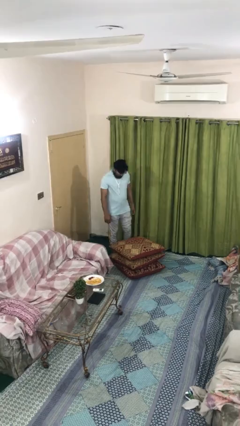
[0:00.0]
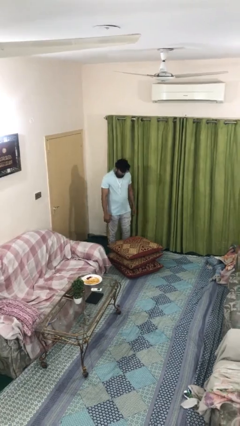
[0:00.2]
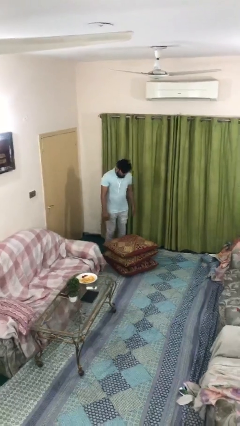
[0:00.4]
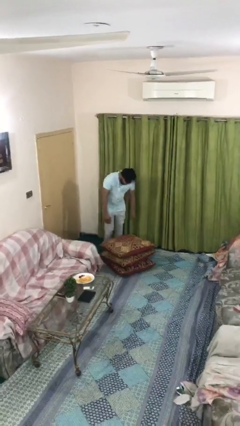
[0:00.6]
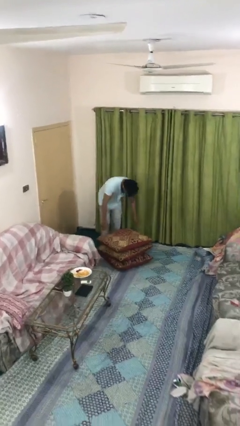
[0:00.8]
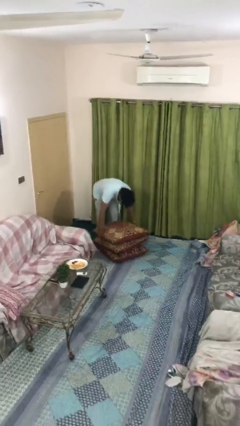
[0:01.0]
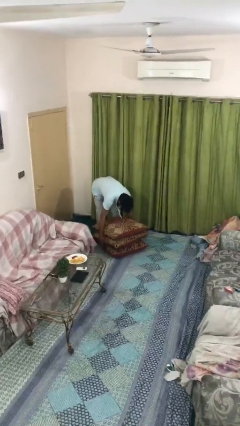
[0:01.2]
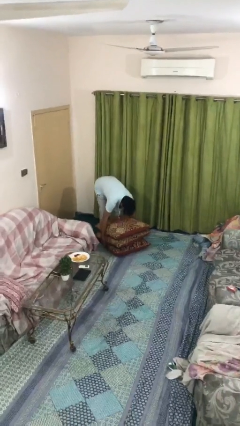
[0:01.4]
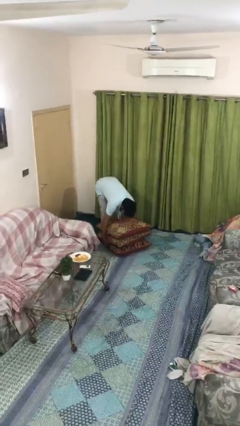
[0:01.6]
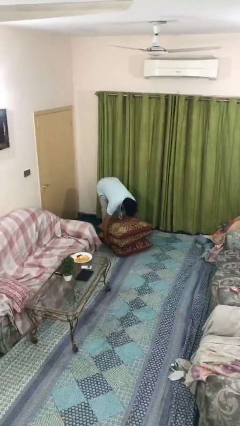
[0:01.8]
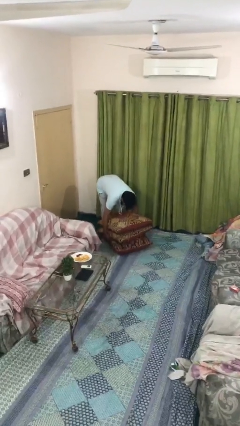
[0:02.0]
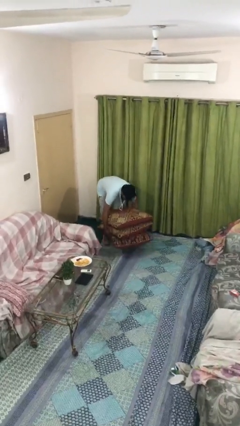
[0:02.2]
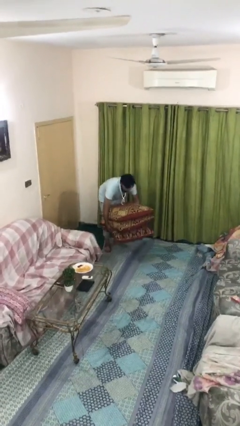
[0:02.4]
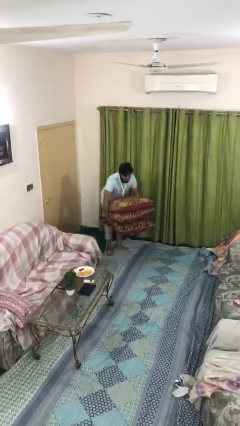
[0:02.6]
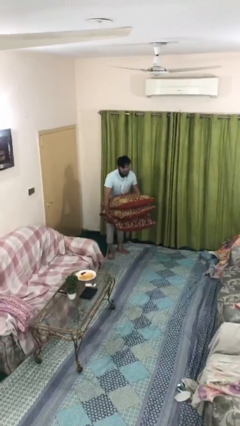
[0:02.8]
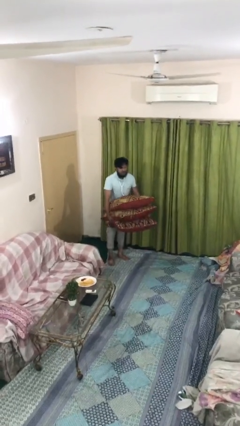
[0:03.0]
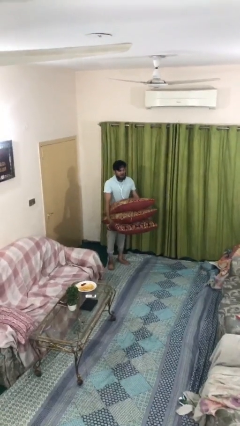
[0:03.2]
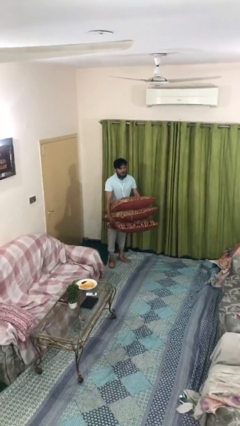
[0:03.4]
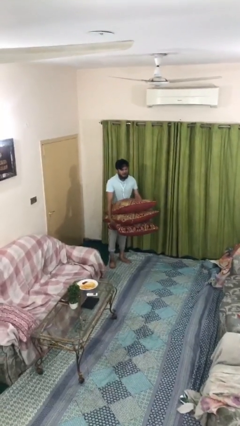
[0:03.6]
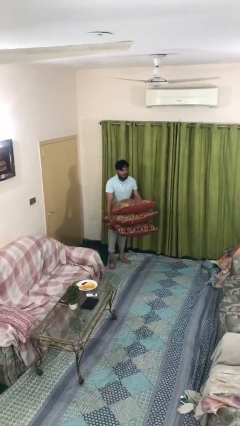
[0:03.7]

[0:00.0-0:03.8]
person picks up object from floor

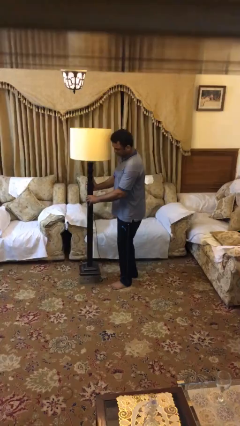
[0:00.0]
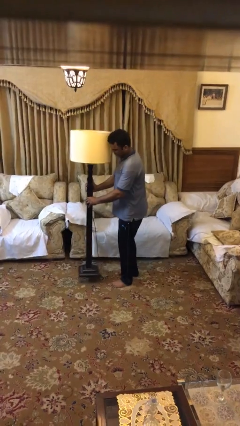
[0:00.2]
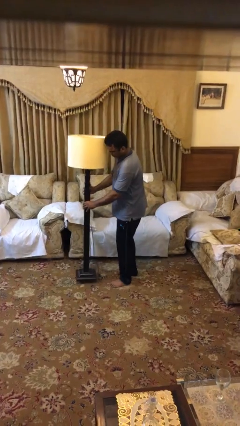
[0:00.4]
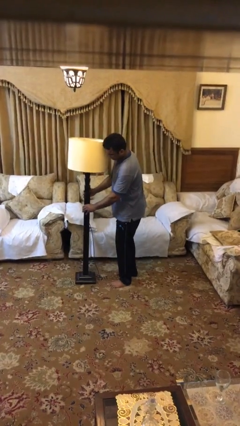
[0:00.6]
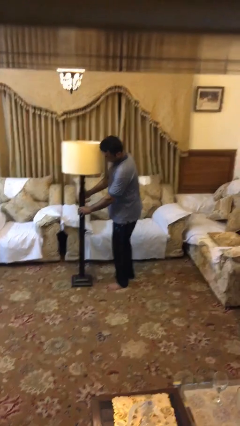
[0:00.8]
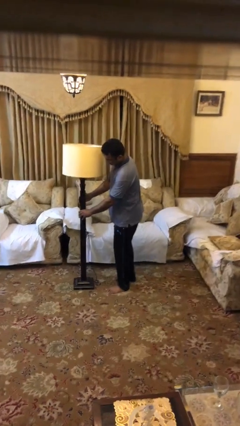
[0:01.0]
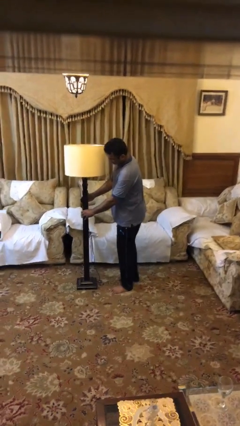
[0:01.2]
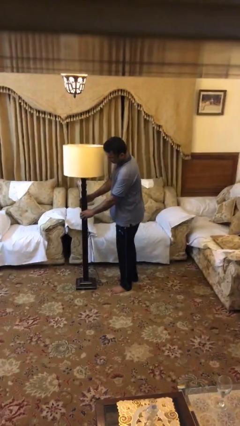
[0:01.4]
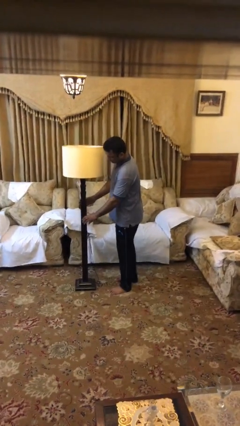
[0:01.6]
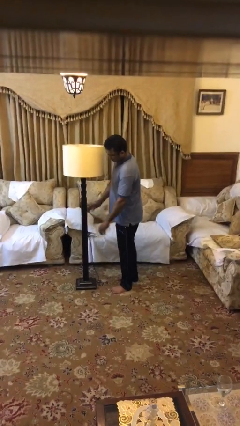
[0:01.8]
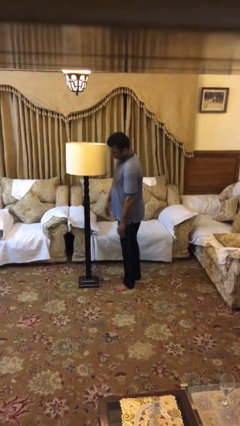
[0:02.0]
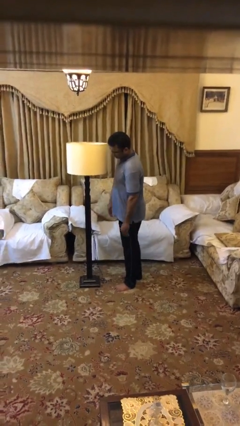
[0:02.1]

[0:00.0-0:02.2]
person puts down object on floor

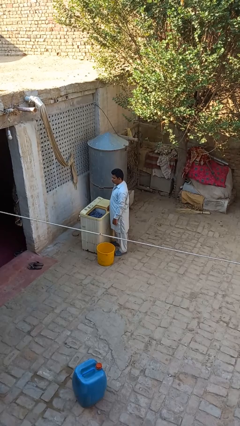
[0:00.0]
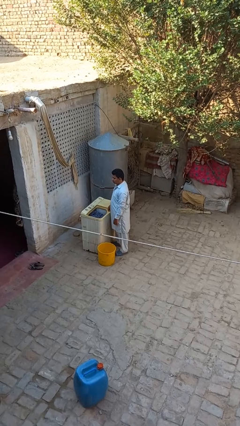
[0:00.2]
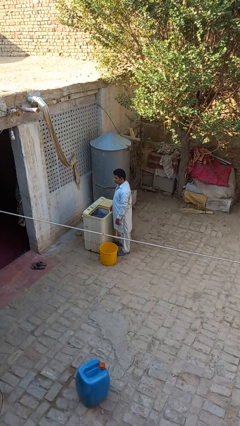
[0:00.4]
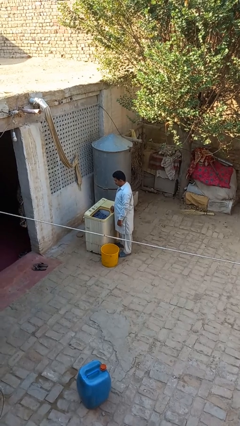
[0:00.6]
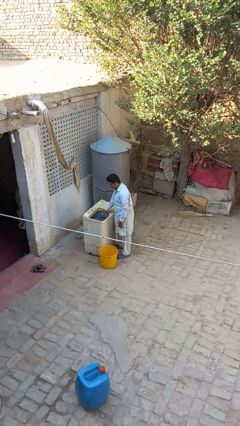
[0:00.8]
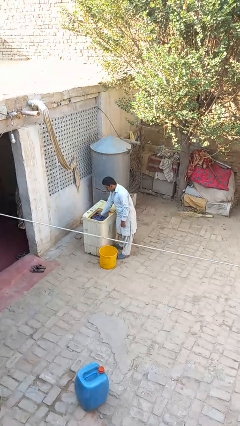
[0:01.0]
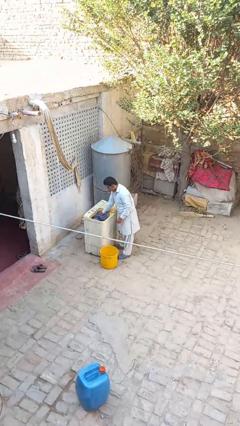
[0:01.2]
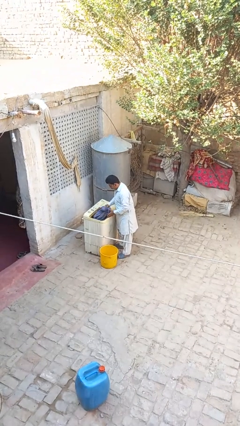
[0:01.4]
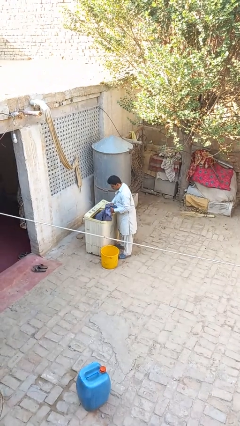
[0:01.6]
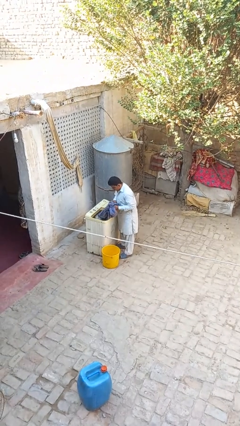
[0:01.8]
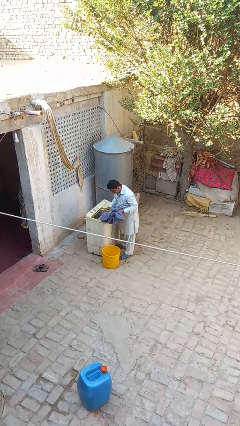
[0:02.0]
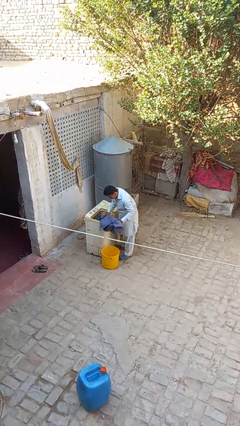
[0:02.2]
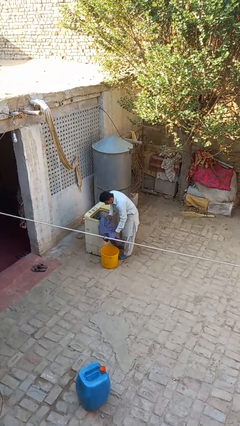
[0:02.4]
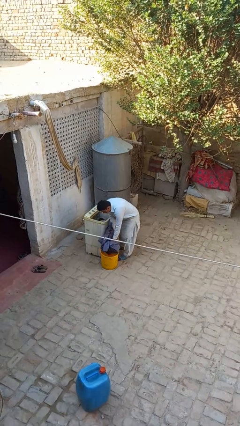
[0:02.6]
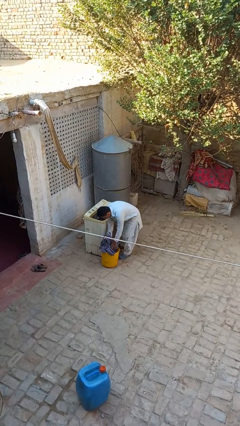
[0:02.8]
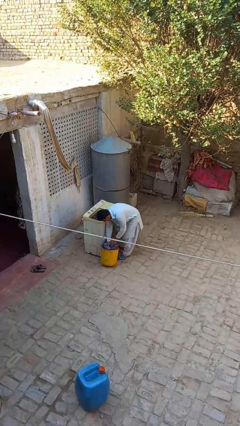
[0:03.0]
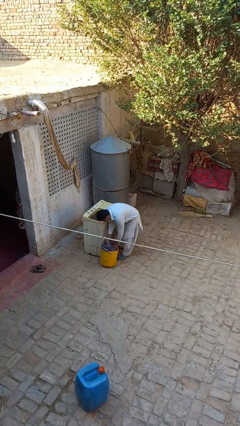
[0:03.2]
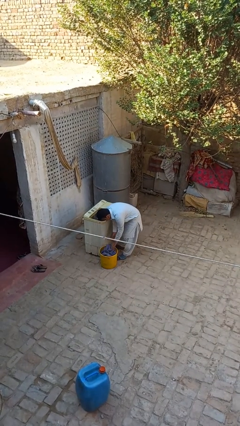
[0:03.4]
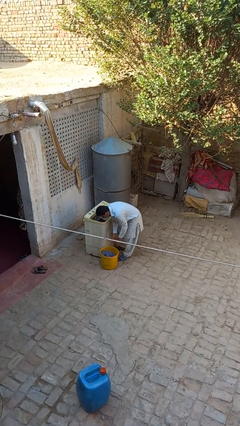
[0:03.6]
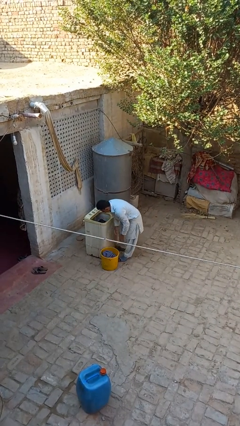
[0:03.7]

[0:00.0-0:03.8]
person unloads clotheswasher

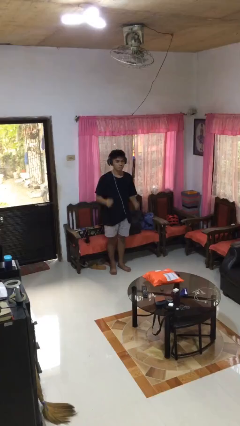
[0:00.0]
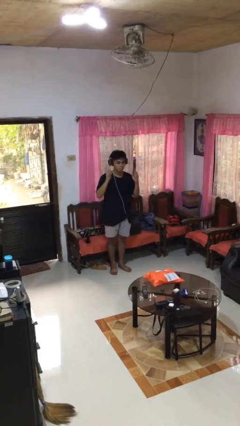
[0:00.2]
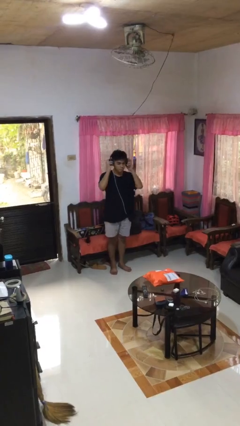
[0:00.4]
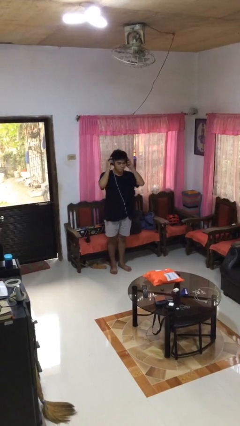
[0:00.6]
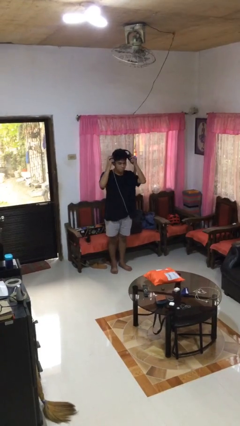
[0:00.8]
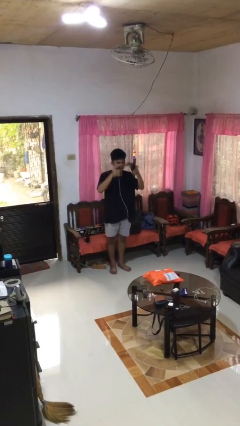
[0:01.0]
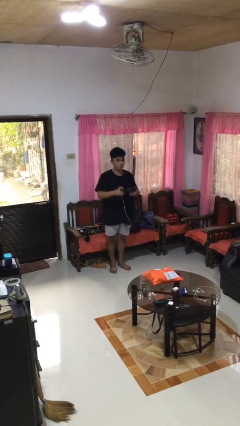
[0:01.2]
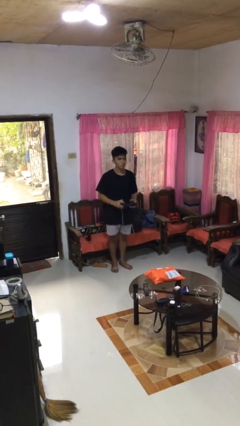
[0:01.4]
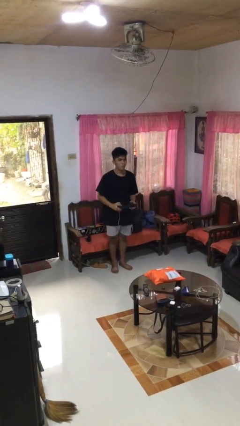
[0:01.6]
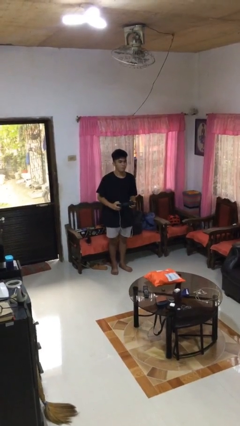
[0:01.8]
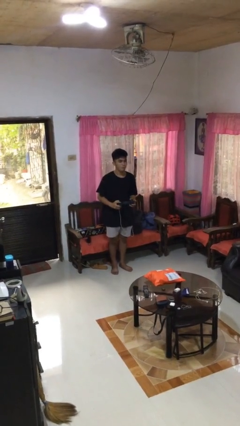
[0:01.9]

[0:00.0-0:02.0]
person takes off headphones

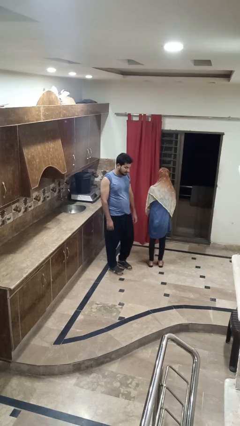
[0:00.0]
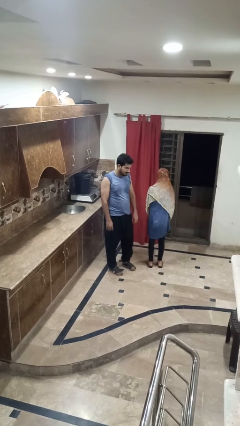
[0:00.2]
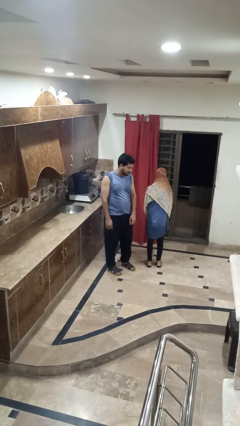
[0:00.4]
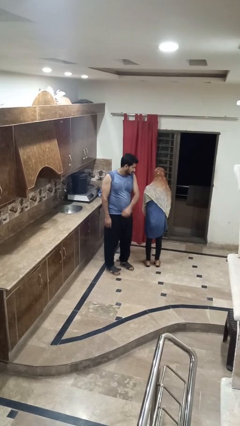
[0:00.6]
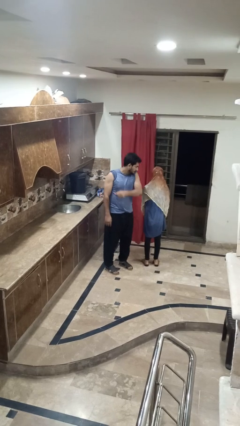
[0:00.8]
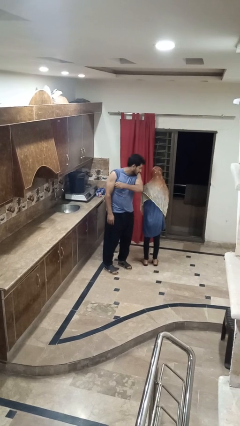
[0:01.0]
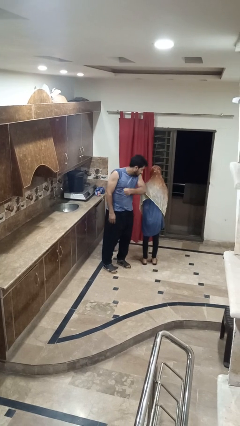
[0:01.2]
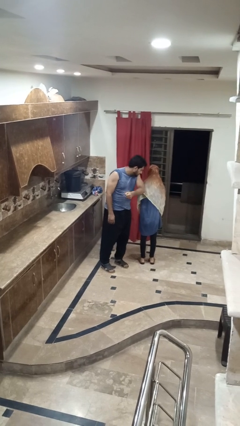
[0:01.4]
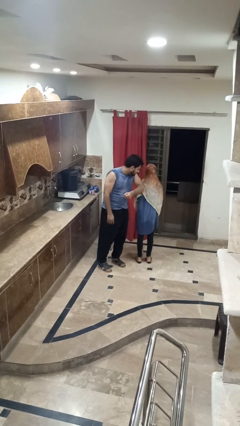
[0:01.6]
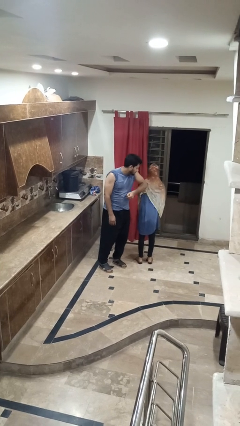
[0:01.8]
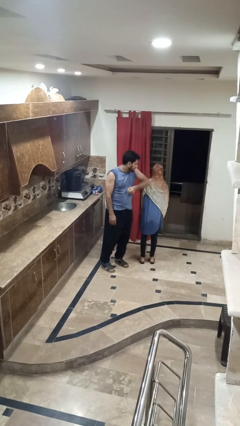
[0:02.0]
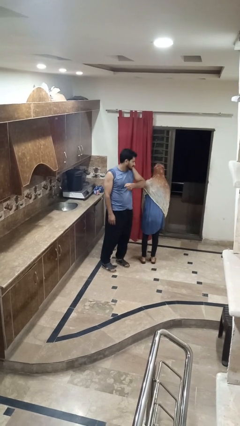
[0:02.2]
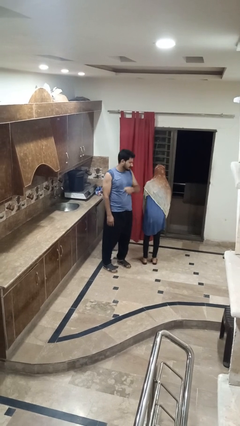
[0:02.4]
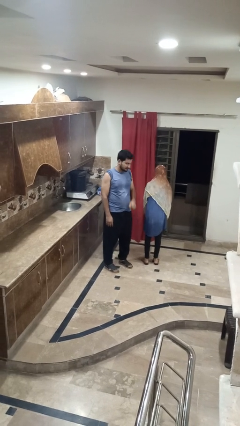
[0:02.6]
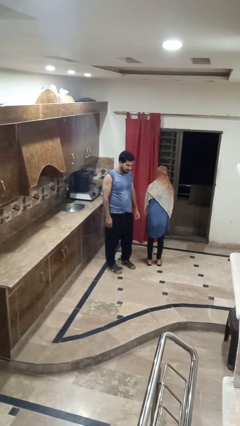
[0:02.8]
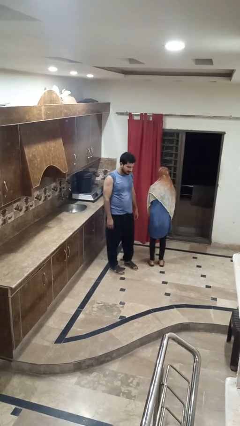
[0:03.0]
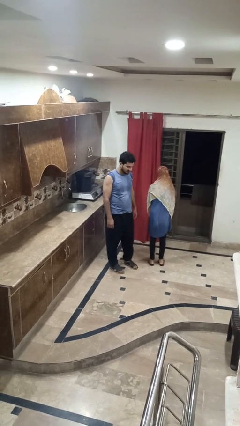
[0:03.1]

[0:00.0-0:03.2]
person nudges person with elbow

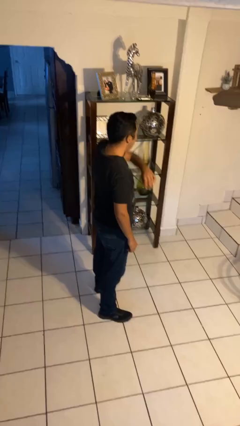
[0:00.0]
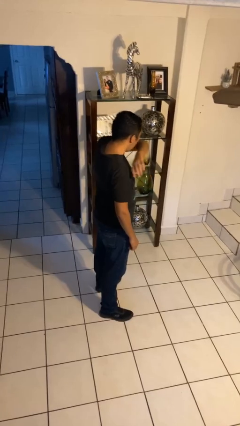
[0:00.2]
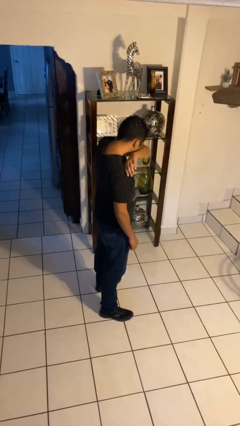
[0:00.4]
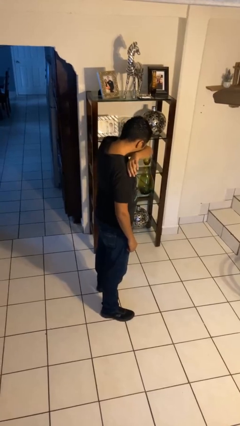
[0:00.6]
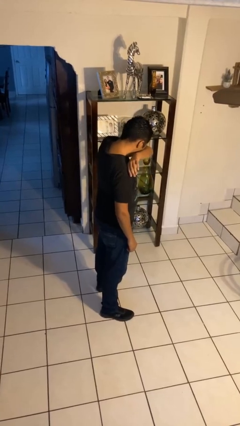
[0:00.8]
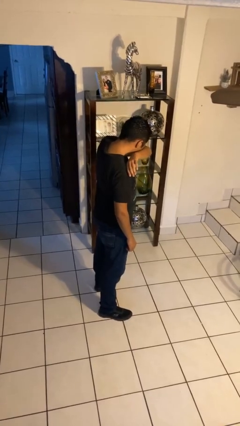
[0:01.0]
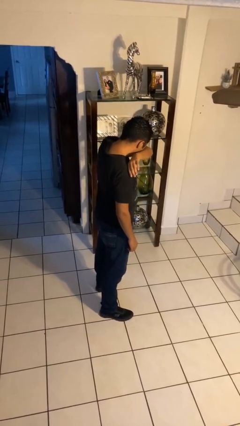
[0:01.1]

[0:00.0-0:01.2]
person sneezes into arm

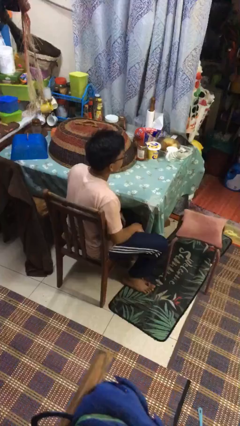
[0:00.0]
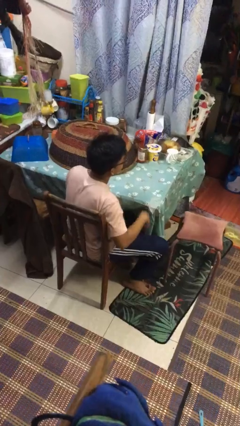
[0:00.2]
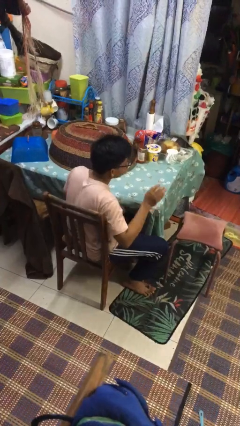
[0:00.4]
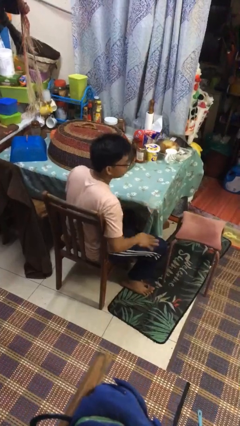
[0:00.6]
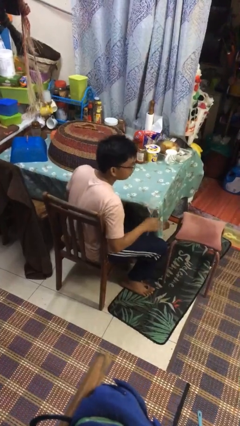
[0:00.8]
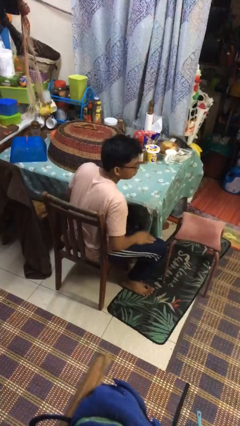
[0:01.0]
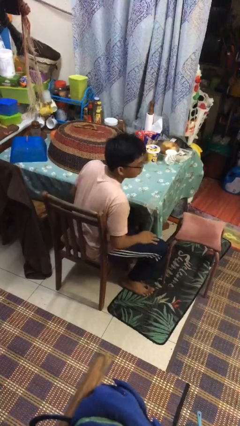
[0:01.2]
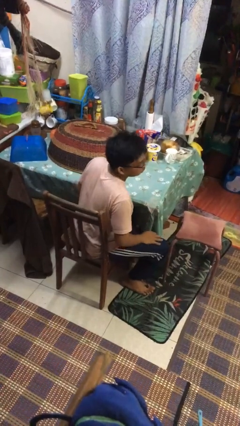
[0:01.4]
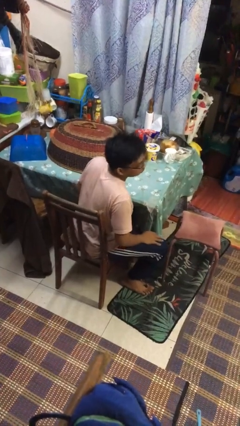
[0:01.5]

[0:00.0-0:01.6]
person slaps hands on thighs
